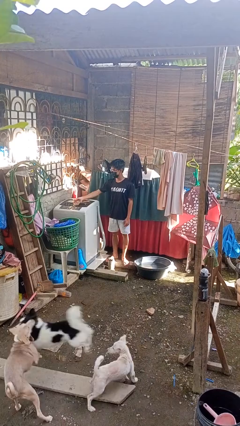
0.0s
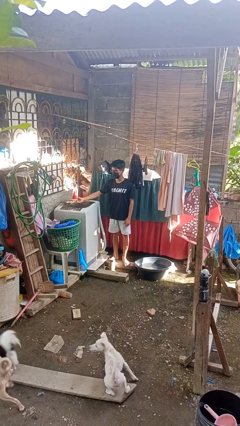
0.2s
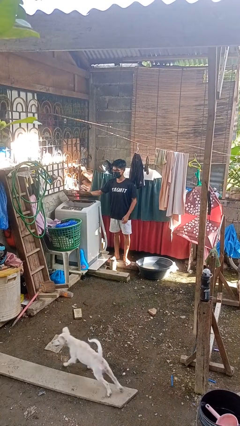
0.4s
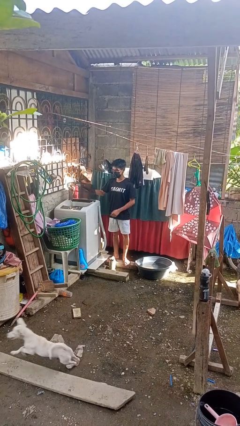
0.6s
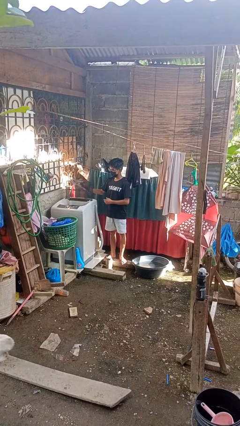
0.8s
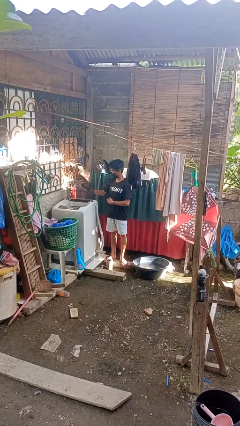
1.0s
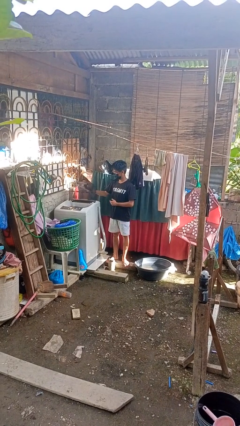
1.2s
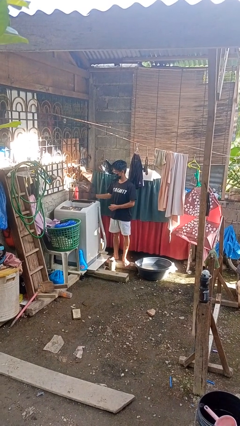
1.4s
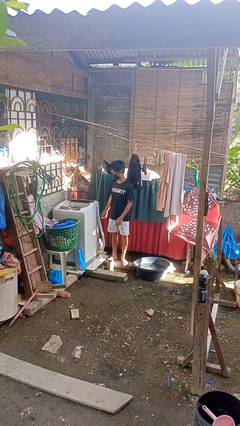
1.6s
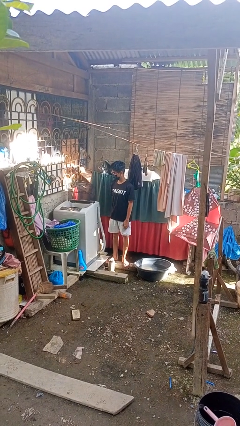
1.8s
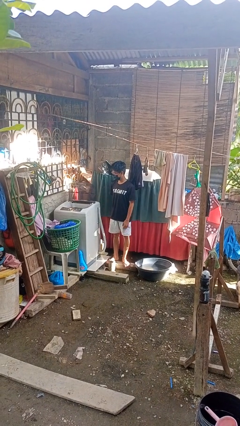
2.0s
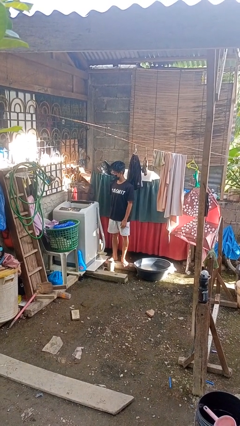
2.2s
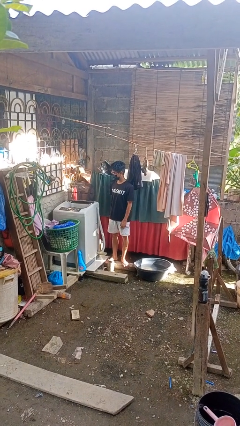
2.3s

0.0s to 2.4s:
person opens clothes washer

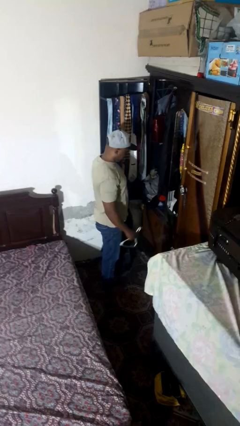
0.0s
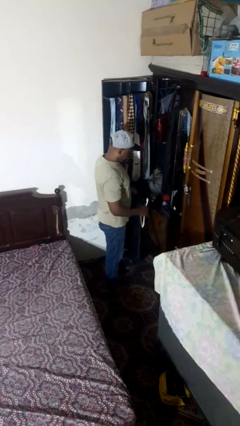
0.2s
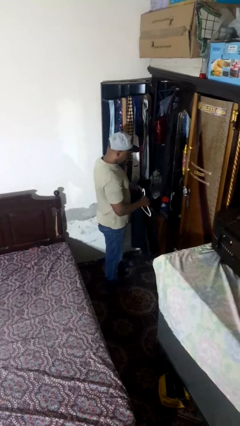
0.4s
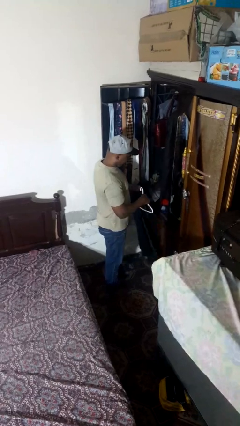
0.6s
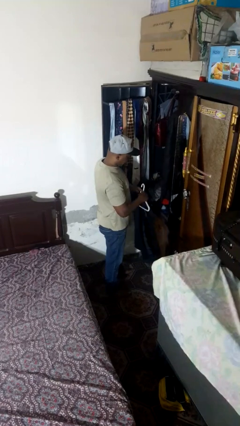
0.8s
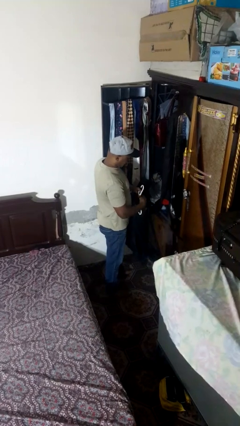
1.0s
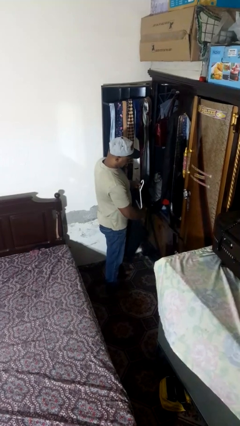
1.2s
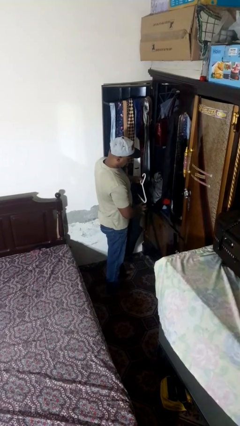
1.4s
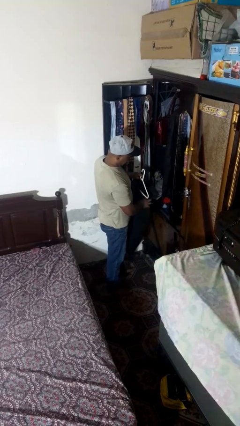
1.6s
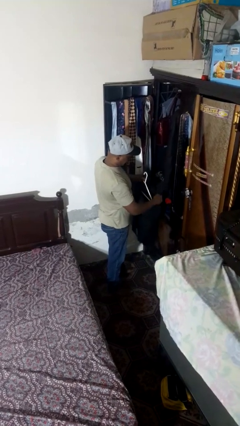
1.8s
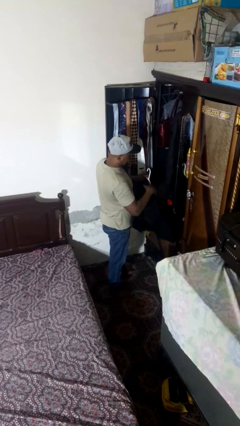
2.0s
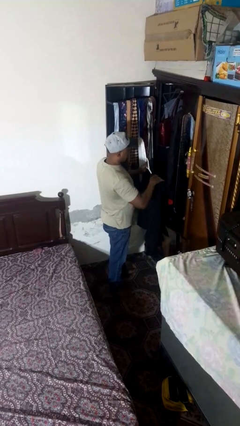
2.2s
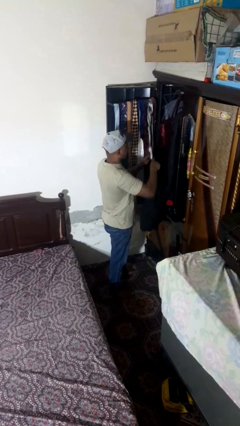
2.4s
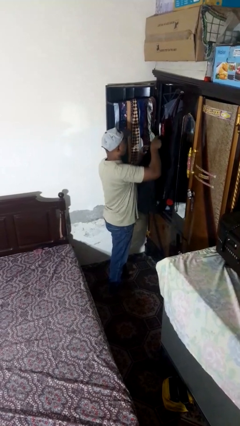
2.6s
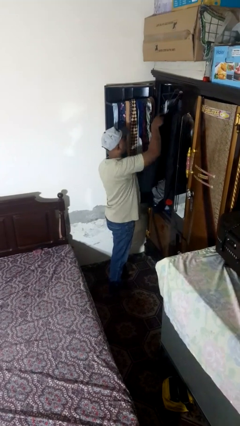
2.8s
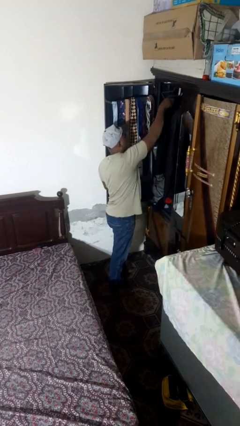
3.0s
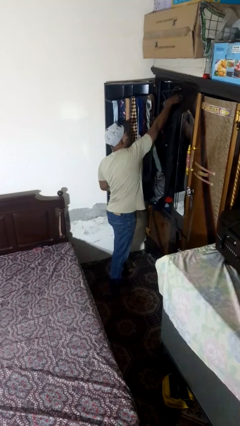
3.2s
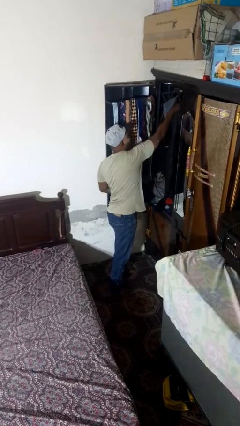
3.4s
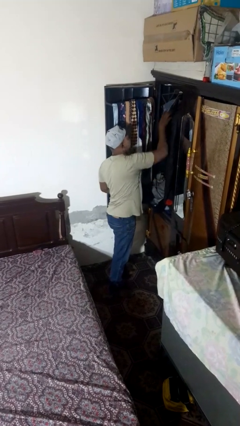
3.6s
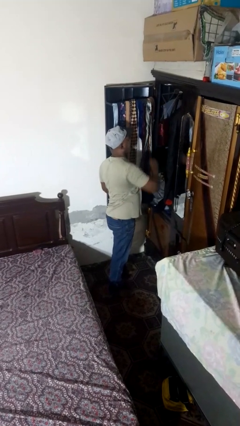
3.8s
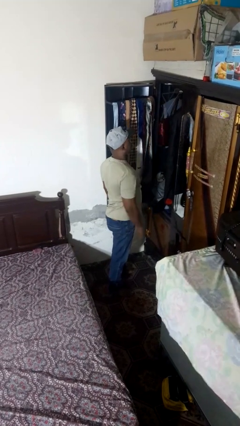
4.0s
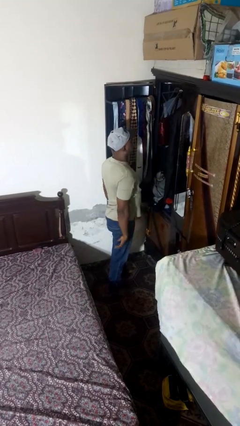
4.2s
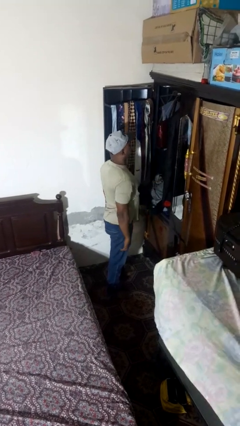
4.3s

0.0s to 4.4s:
person puts clothes into closet

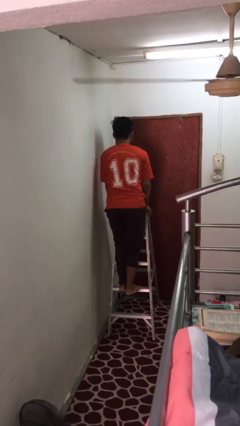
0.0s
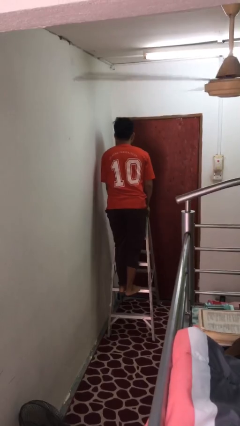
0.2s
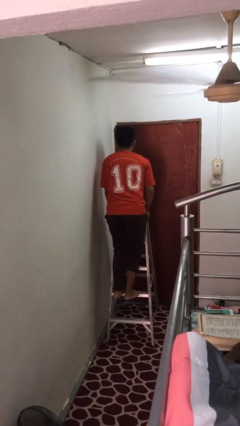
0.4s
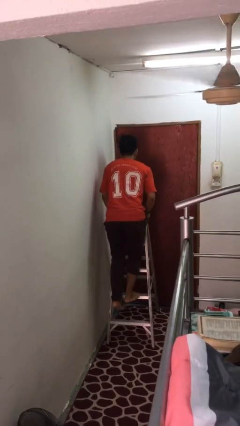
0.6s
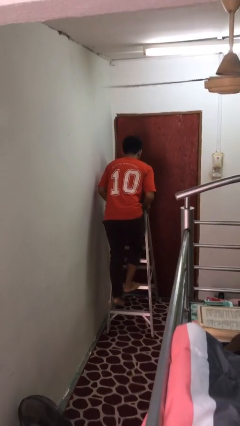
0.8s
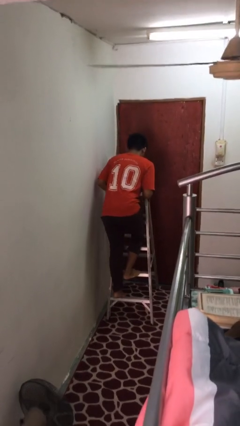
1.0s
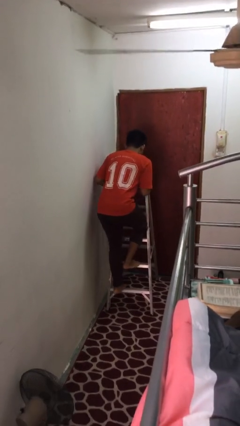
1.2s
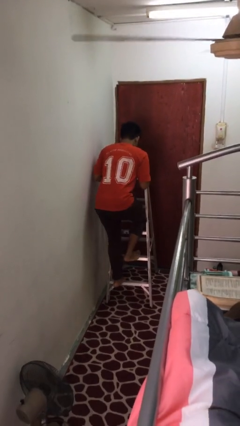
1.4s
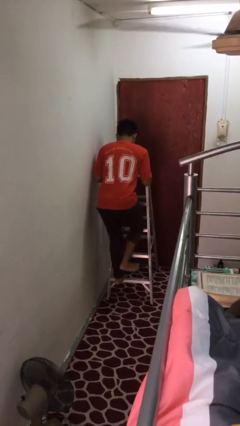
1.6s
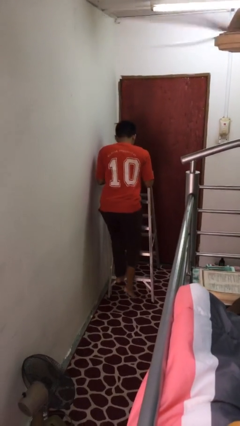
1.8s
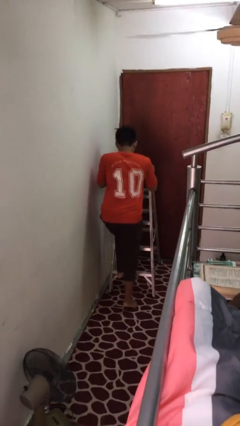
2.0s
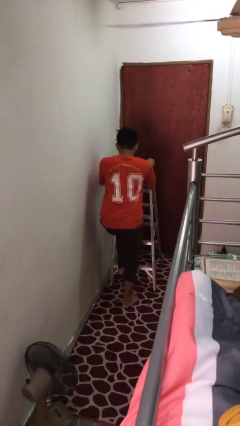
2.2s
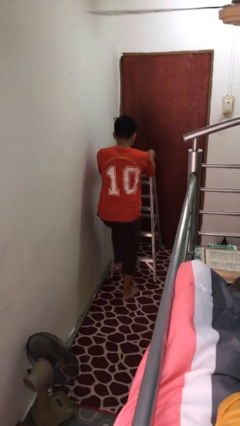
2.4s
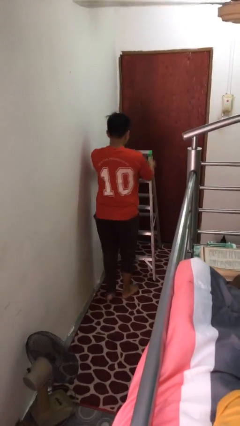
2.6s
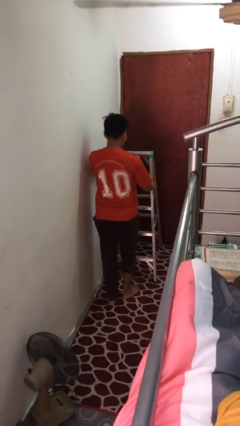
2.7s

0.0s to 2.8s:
person climbs down ladder

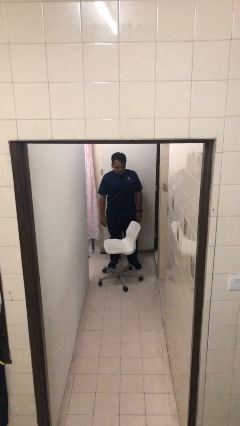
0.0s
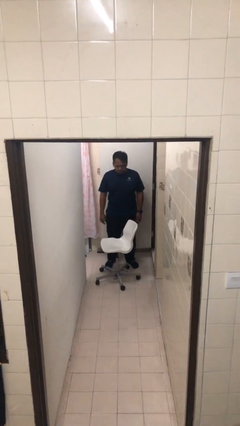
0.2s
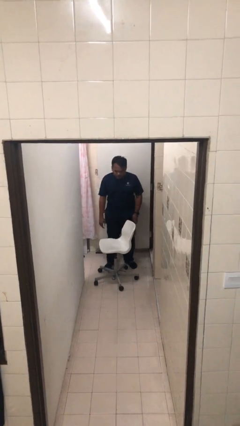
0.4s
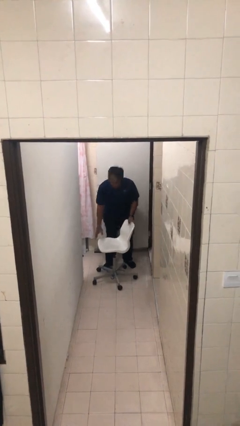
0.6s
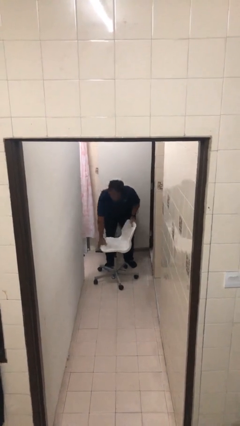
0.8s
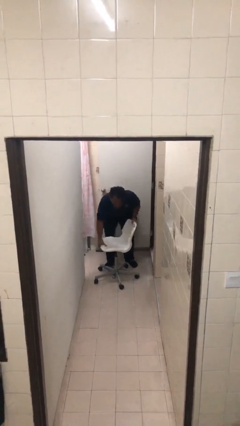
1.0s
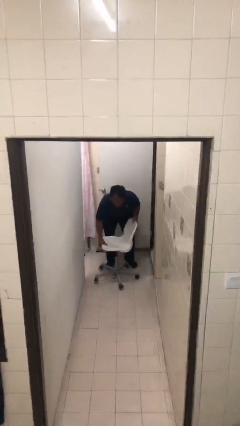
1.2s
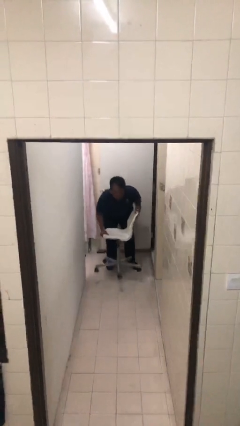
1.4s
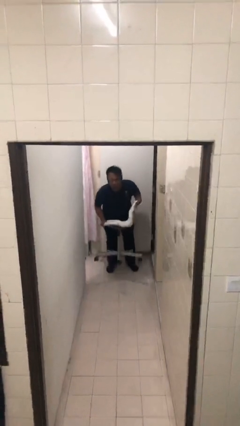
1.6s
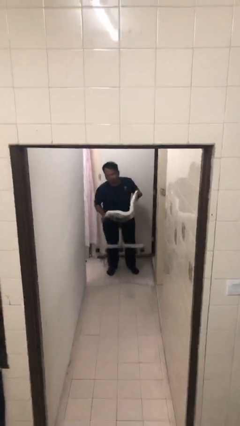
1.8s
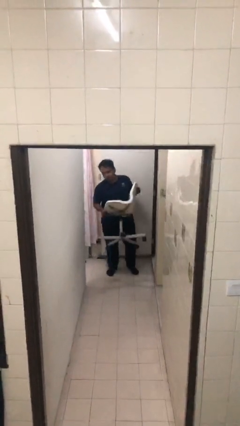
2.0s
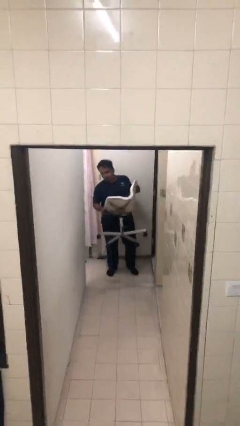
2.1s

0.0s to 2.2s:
person picks up object from floor

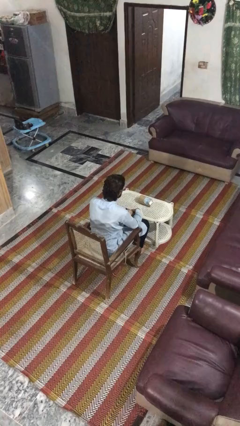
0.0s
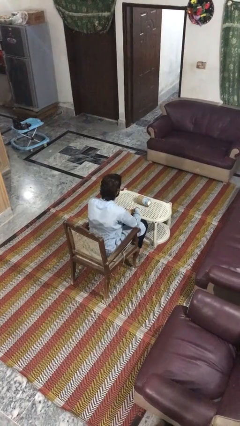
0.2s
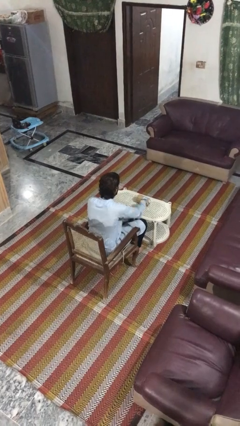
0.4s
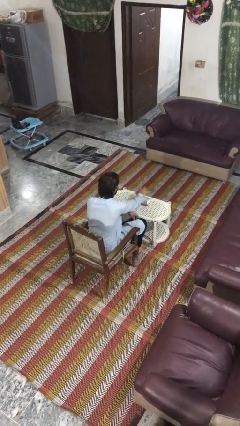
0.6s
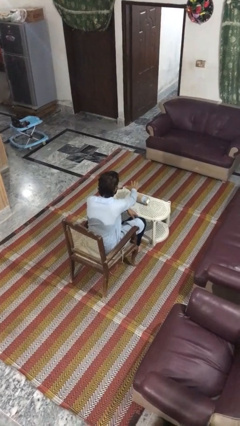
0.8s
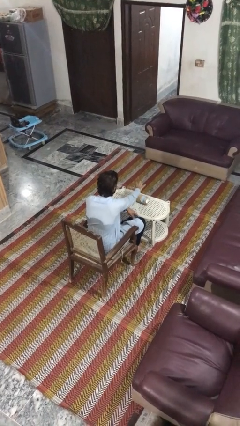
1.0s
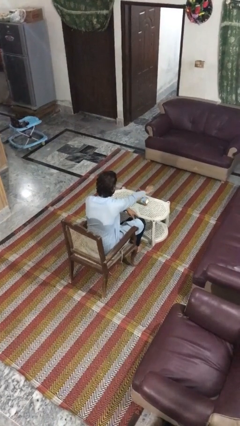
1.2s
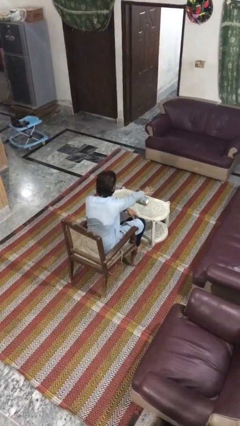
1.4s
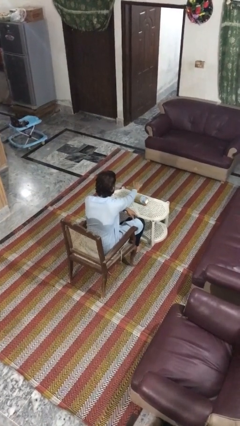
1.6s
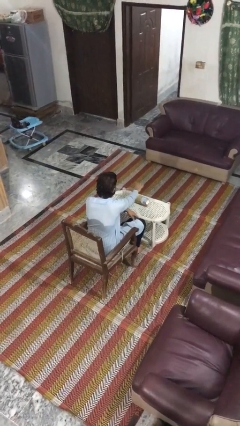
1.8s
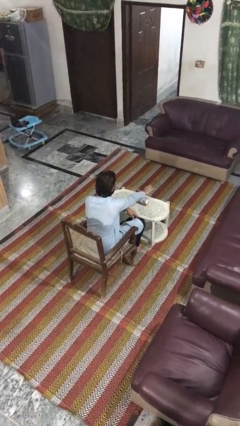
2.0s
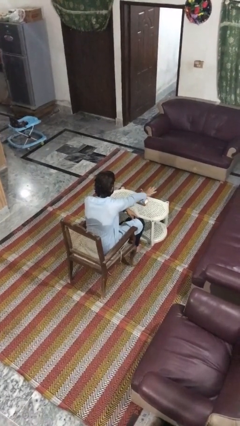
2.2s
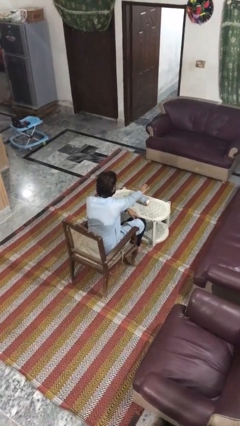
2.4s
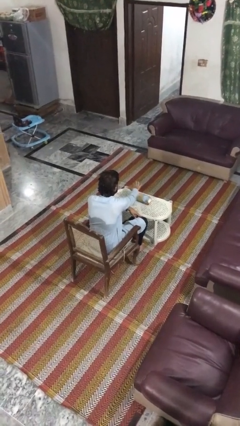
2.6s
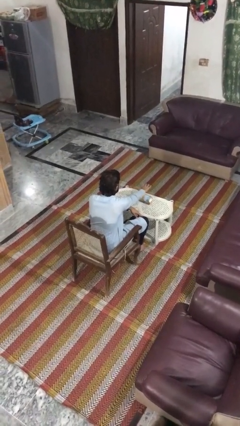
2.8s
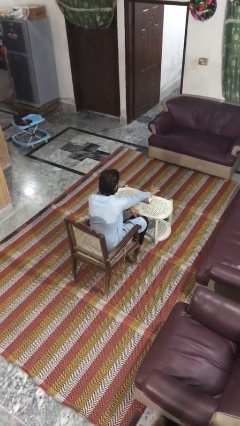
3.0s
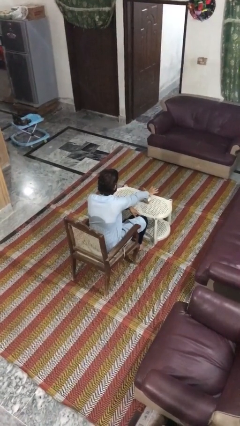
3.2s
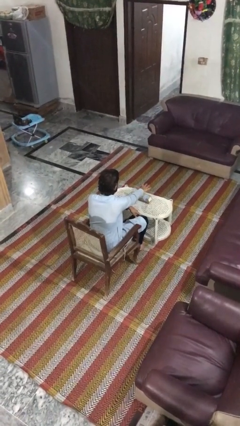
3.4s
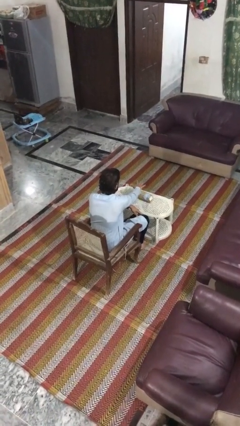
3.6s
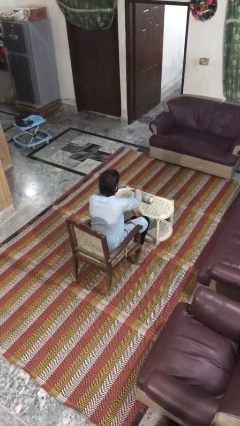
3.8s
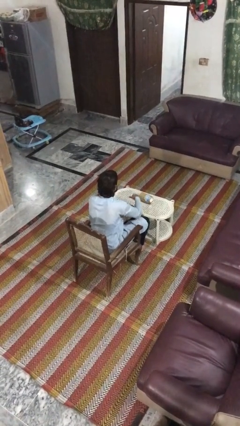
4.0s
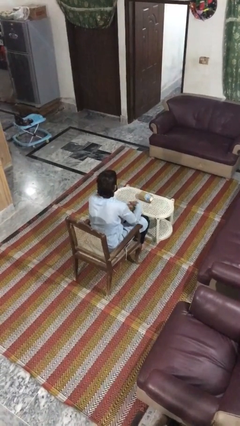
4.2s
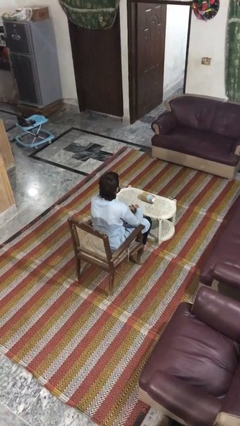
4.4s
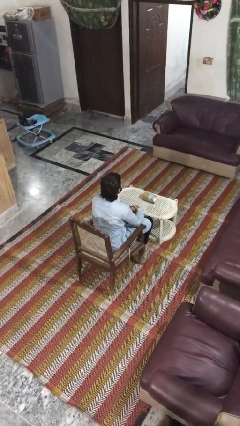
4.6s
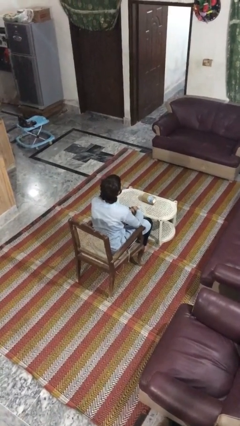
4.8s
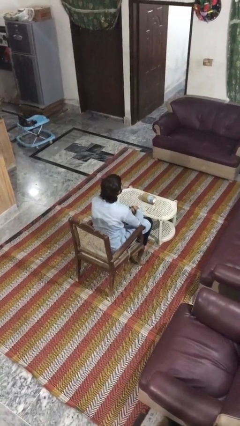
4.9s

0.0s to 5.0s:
person waves hand over object

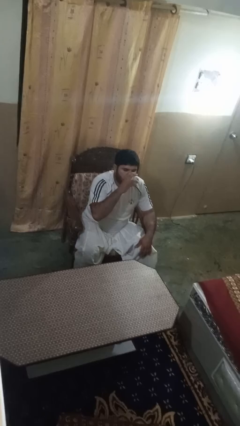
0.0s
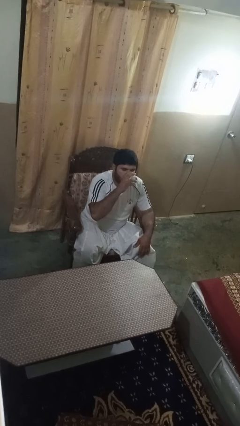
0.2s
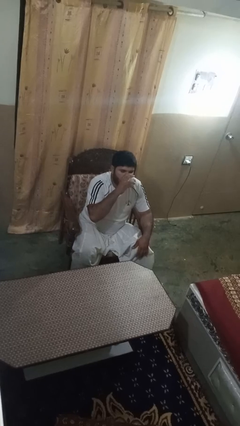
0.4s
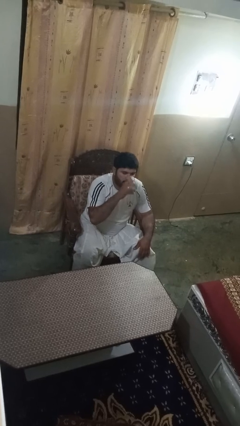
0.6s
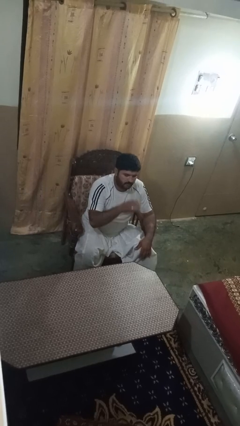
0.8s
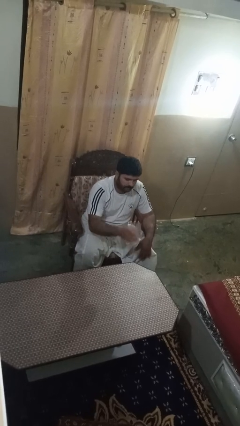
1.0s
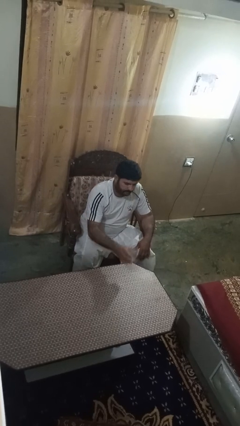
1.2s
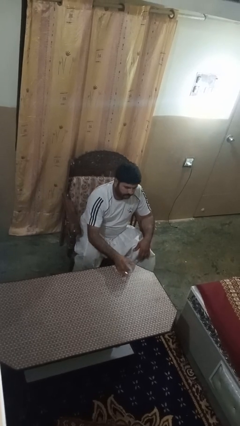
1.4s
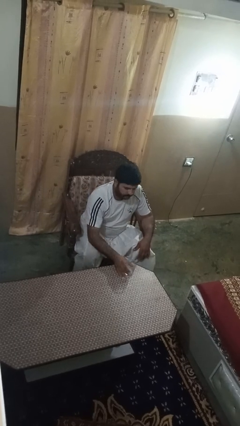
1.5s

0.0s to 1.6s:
person puts down object on table
